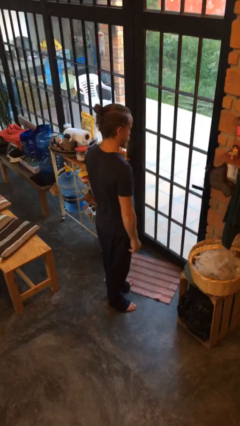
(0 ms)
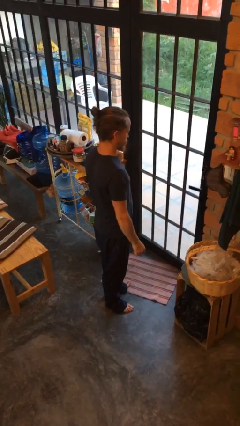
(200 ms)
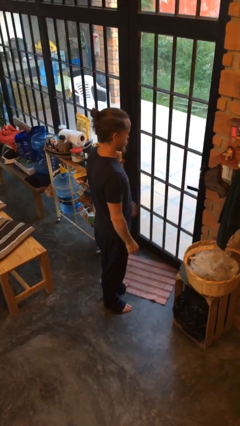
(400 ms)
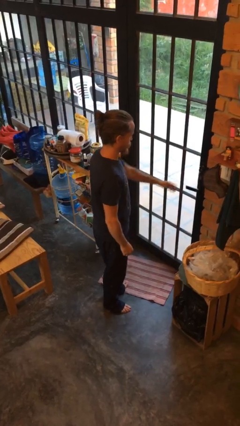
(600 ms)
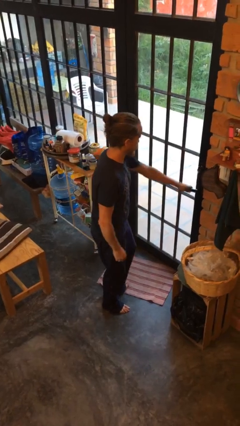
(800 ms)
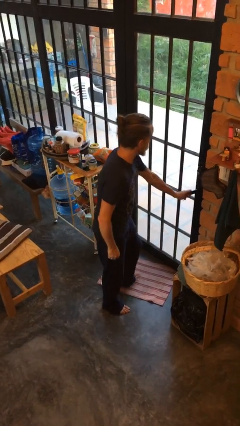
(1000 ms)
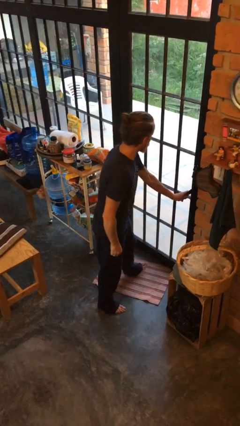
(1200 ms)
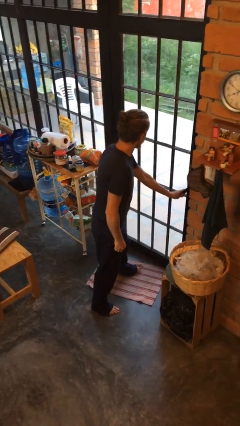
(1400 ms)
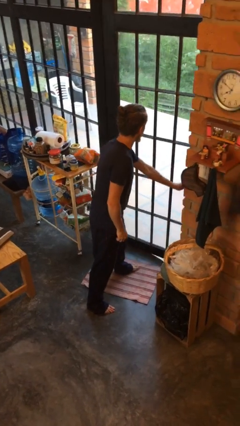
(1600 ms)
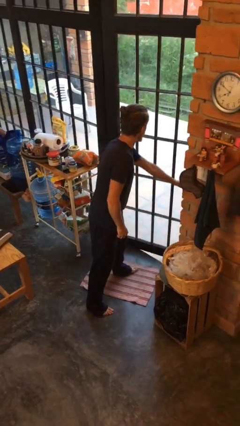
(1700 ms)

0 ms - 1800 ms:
person opens facility door

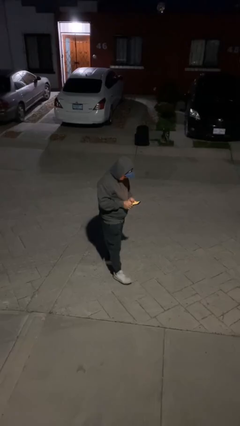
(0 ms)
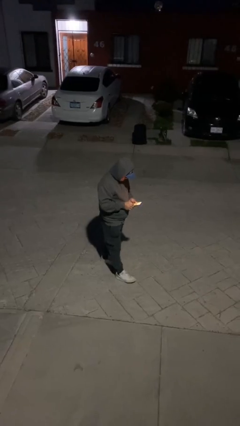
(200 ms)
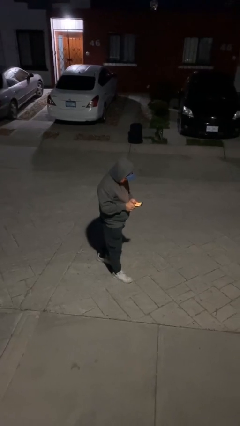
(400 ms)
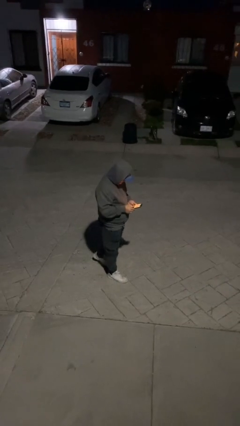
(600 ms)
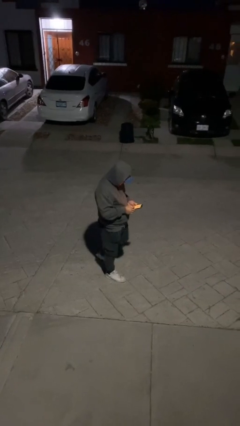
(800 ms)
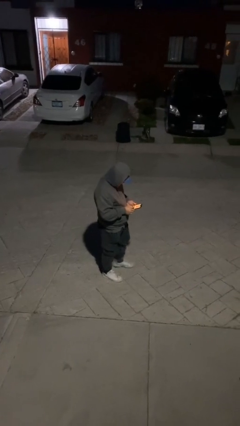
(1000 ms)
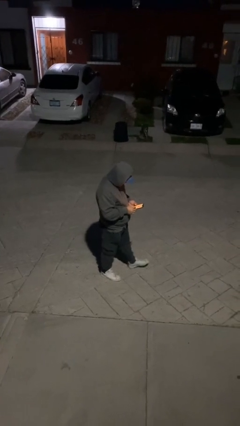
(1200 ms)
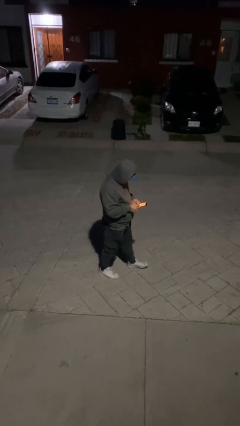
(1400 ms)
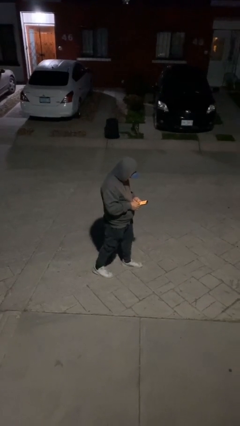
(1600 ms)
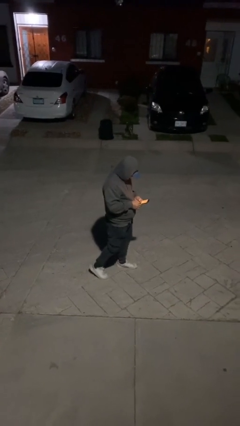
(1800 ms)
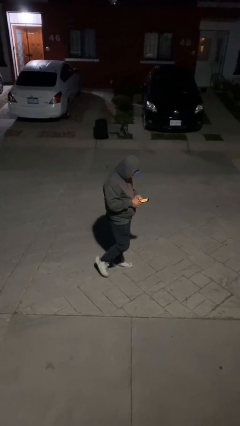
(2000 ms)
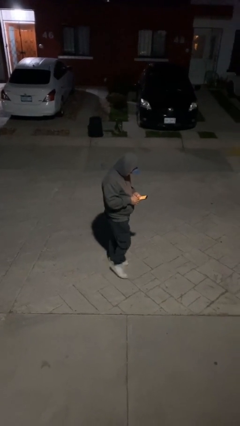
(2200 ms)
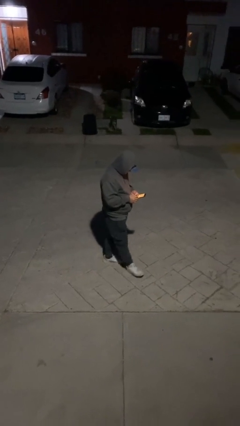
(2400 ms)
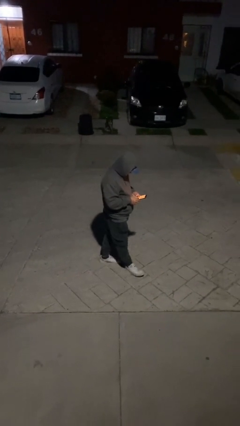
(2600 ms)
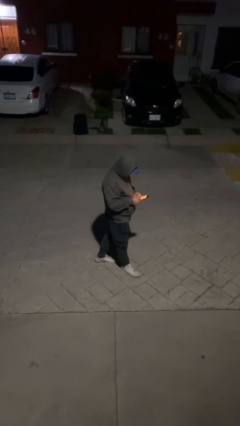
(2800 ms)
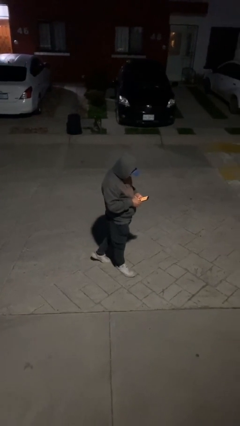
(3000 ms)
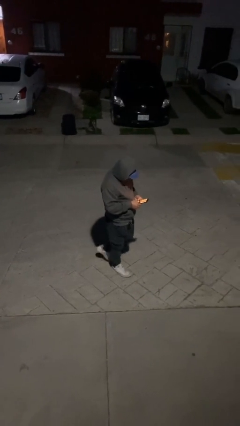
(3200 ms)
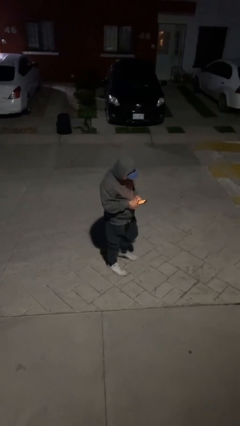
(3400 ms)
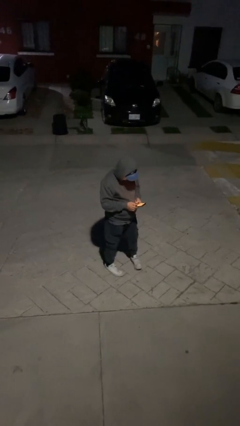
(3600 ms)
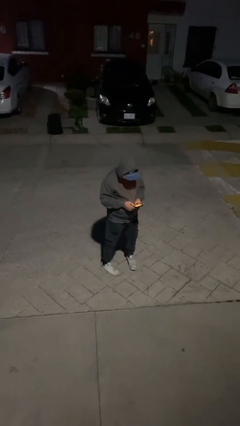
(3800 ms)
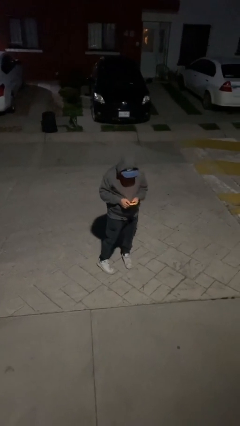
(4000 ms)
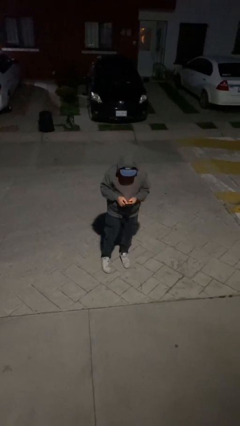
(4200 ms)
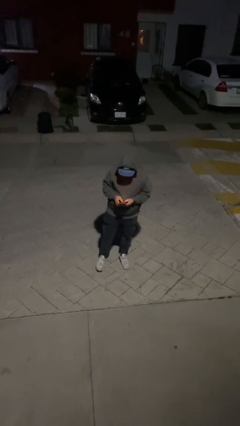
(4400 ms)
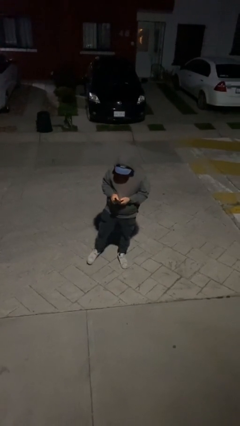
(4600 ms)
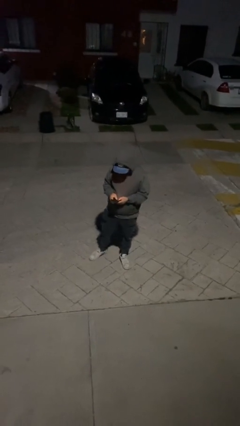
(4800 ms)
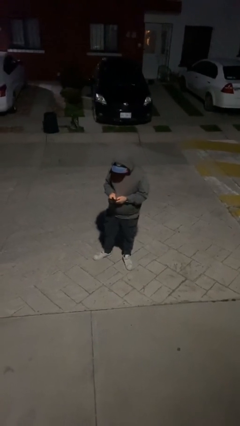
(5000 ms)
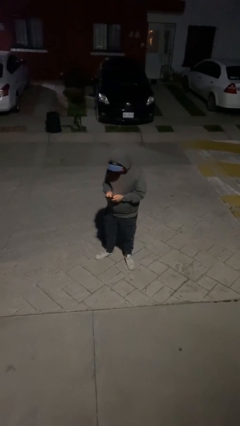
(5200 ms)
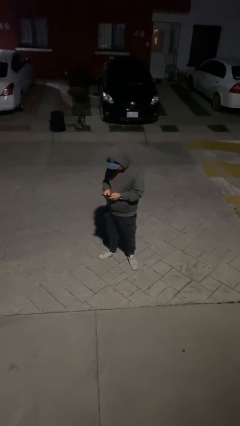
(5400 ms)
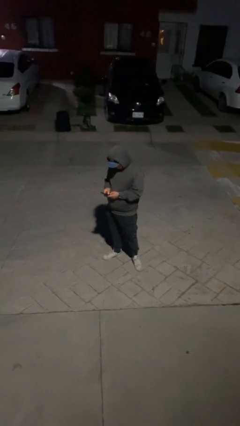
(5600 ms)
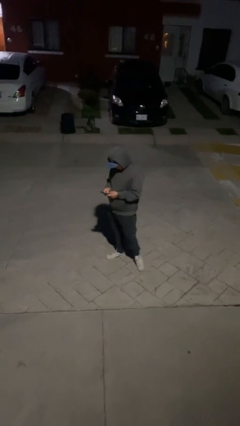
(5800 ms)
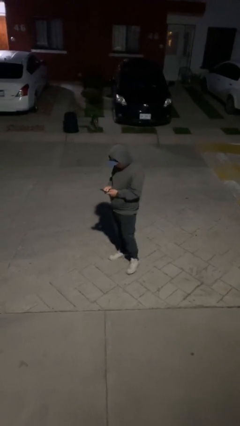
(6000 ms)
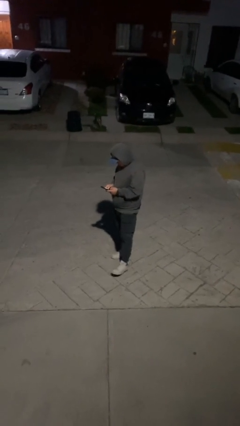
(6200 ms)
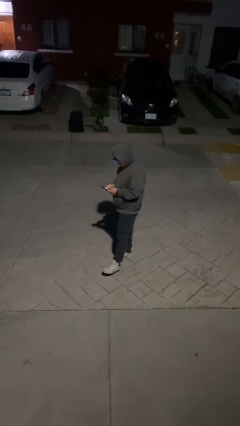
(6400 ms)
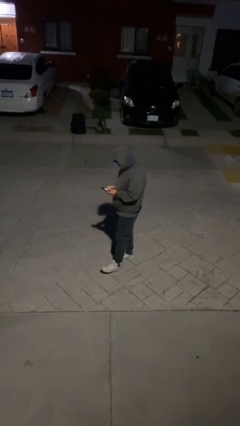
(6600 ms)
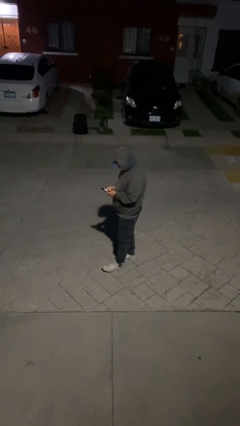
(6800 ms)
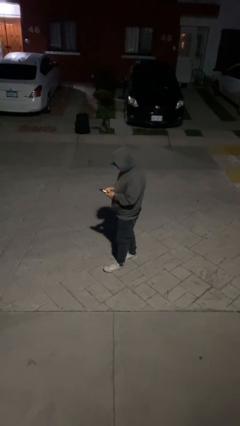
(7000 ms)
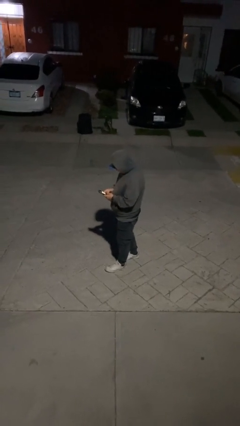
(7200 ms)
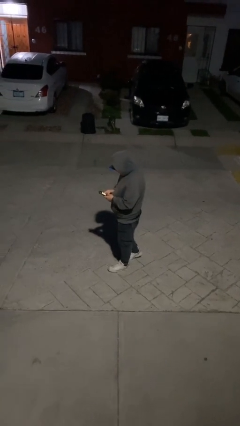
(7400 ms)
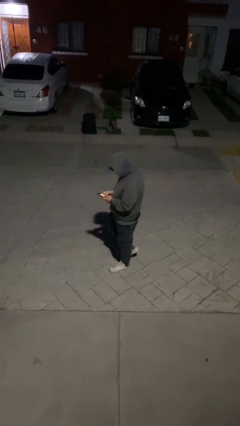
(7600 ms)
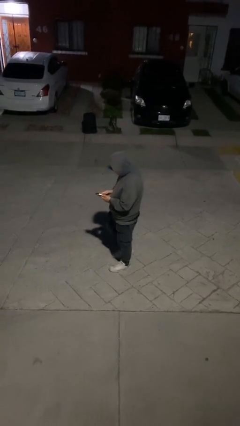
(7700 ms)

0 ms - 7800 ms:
person texts on phone

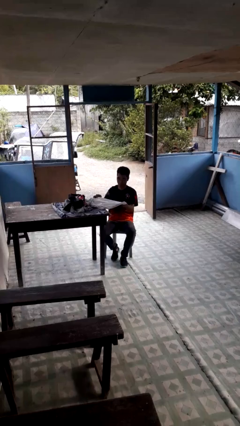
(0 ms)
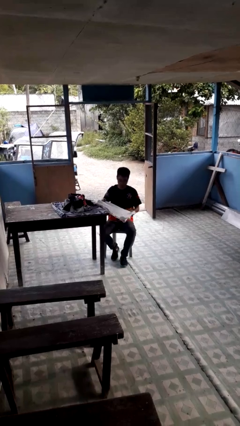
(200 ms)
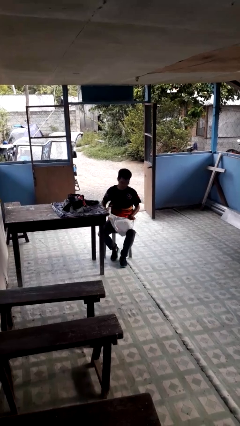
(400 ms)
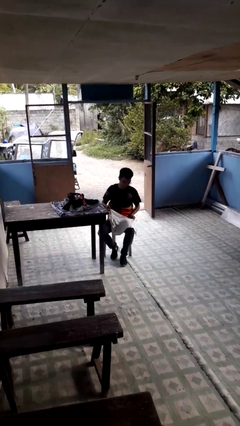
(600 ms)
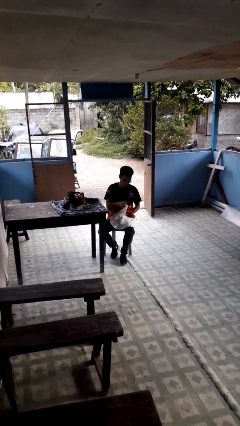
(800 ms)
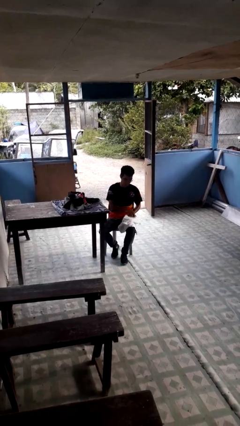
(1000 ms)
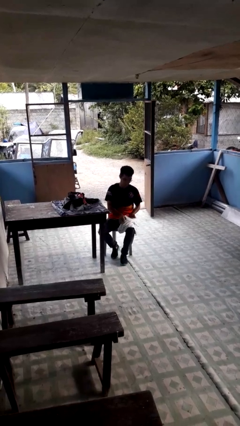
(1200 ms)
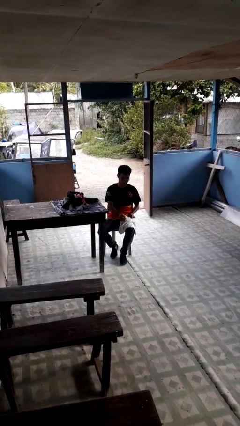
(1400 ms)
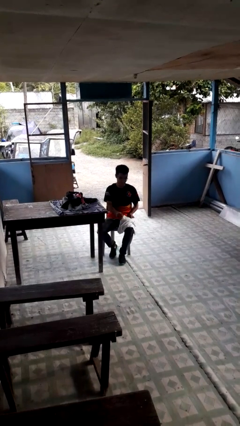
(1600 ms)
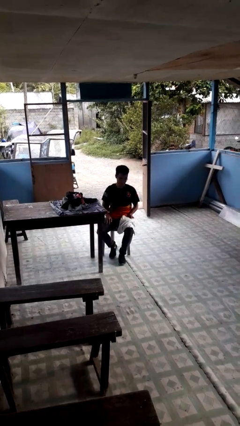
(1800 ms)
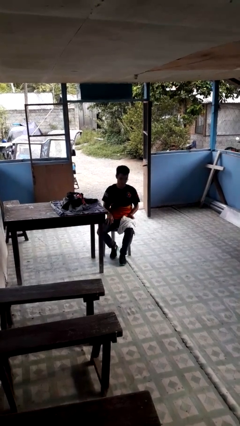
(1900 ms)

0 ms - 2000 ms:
person folds shirt

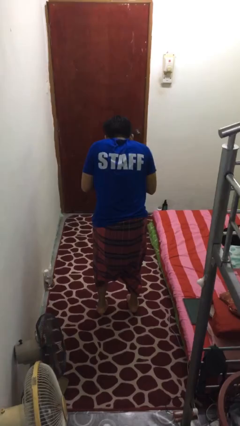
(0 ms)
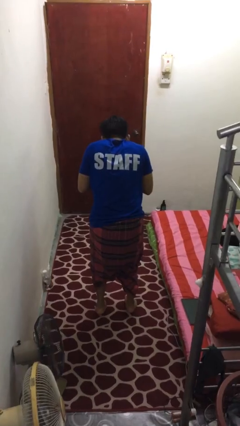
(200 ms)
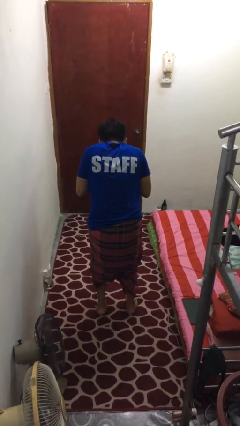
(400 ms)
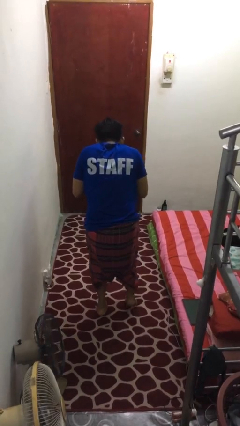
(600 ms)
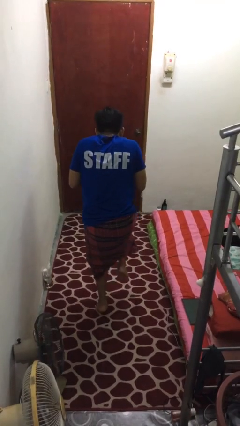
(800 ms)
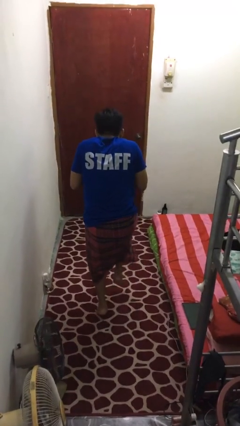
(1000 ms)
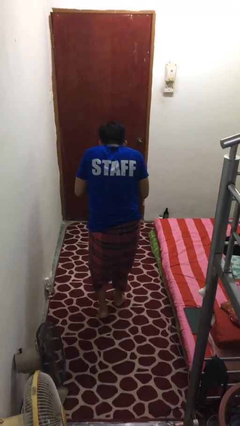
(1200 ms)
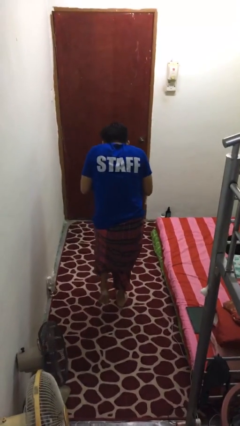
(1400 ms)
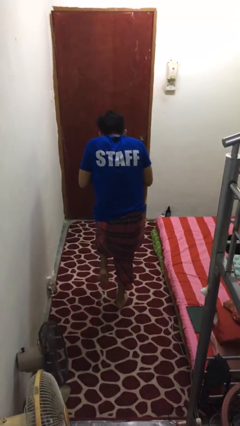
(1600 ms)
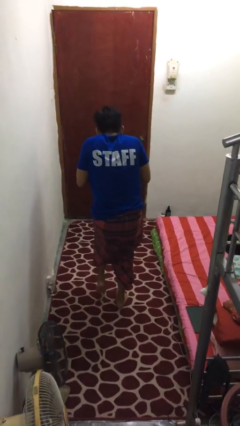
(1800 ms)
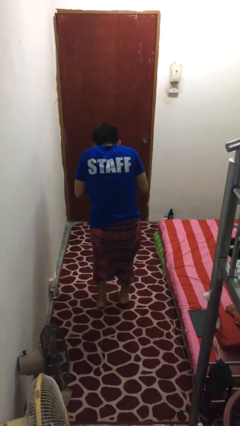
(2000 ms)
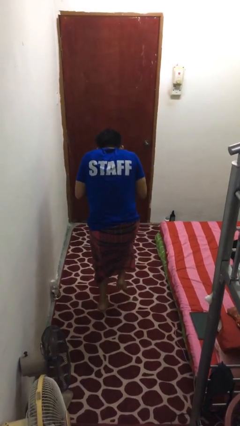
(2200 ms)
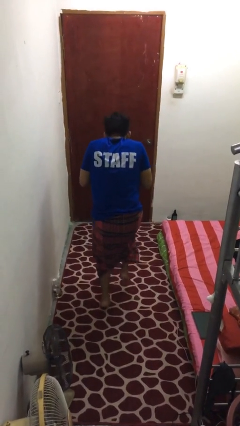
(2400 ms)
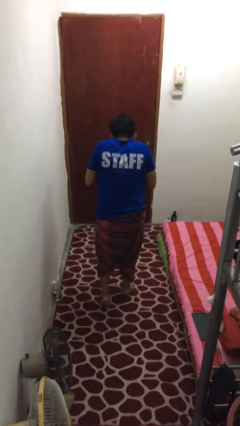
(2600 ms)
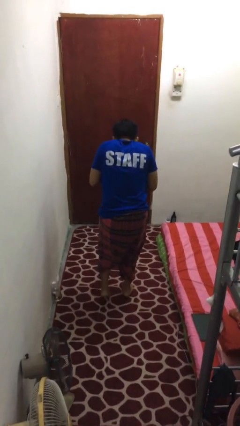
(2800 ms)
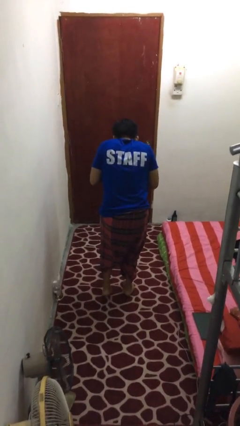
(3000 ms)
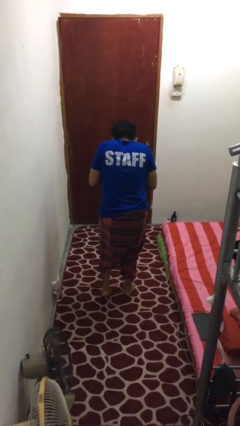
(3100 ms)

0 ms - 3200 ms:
person walks tiptoe

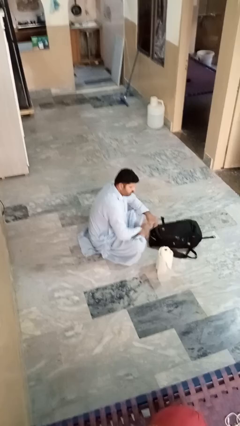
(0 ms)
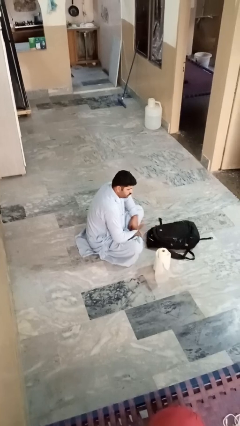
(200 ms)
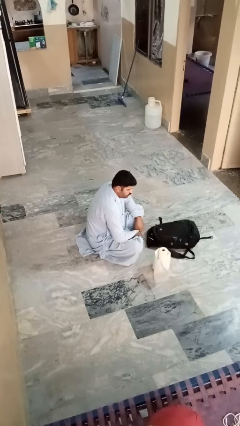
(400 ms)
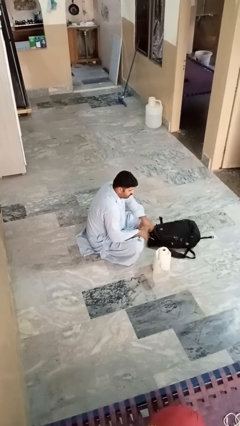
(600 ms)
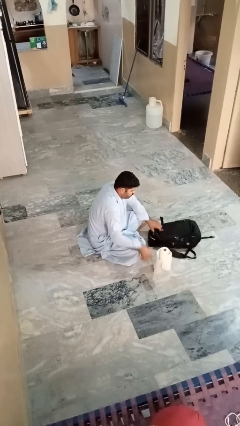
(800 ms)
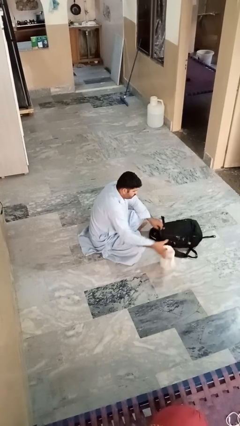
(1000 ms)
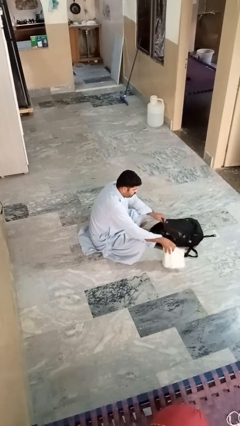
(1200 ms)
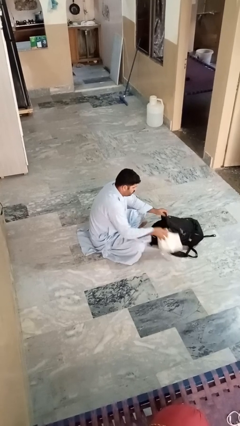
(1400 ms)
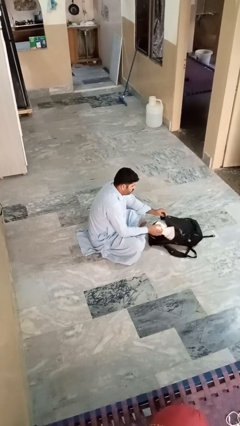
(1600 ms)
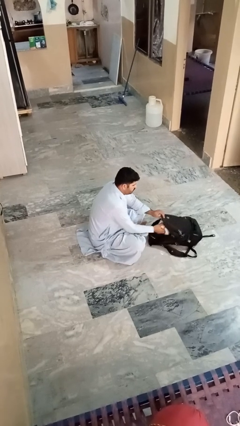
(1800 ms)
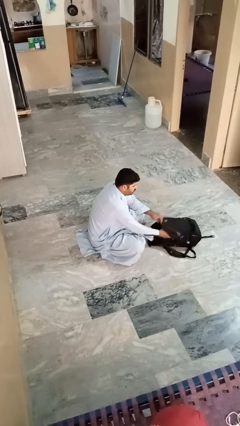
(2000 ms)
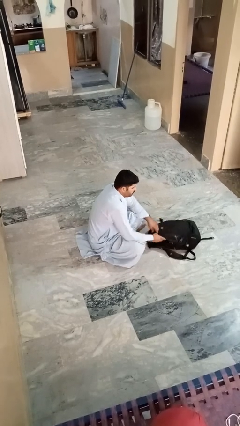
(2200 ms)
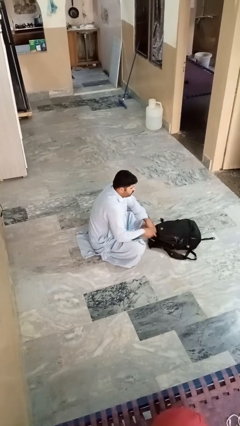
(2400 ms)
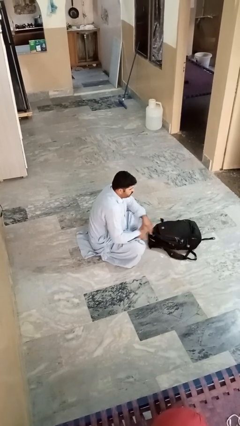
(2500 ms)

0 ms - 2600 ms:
person puts object into bag
